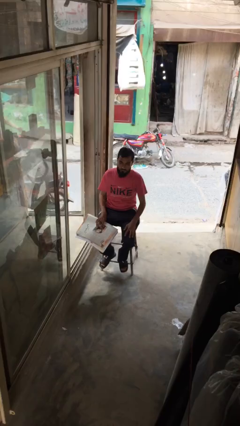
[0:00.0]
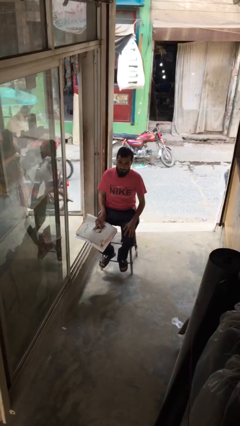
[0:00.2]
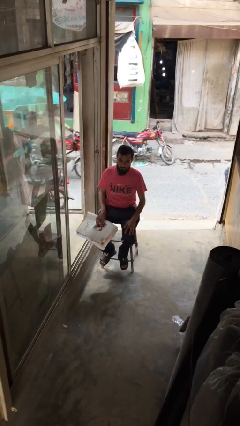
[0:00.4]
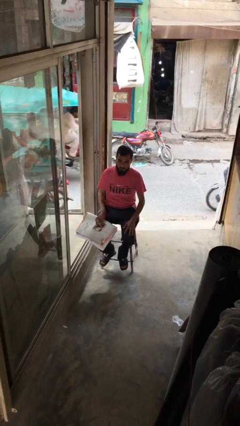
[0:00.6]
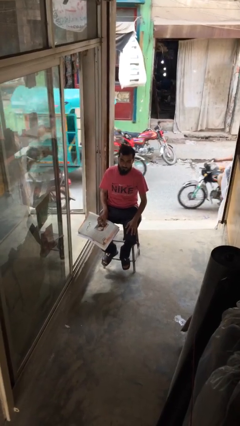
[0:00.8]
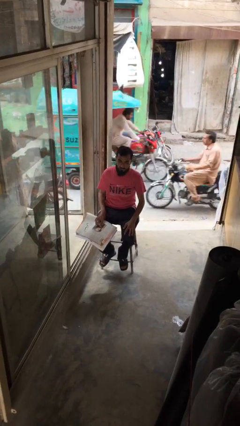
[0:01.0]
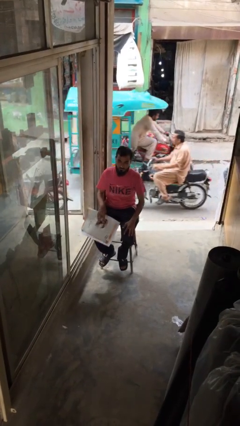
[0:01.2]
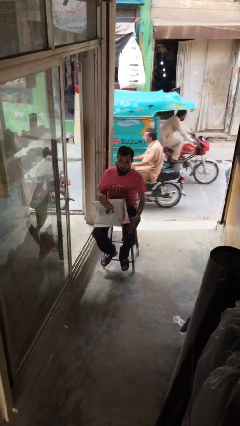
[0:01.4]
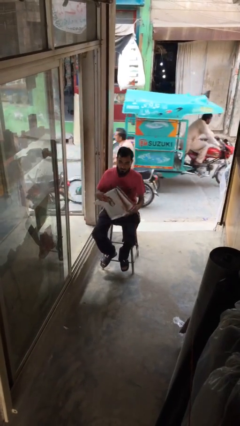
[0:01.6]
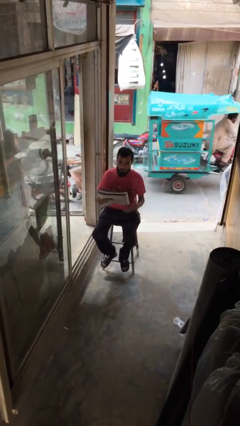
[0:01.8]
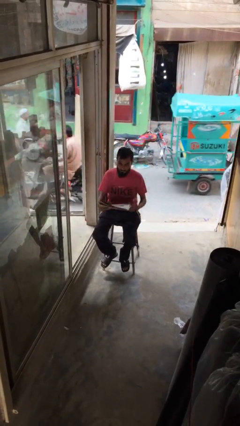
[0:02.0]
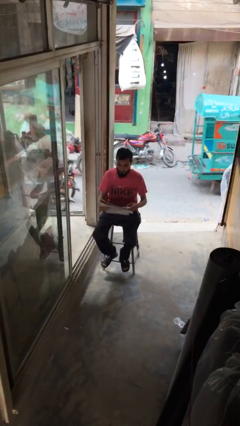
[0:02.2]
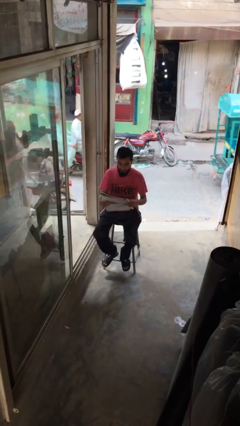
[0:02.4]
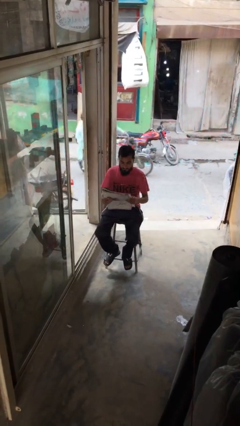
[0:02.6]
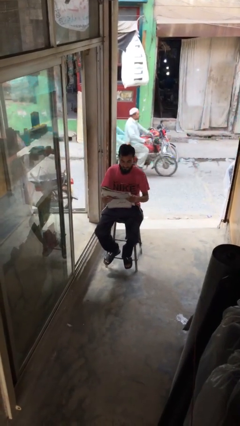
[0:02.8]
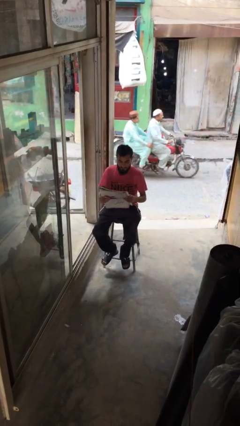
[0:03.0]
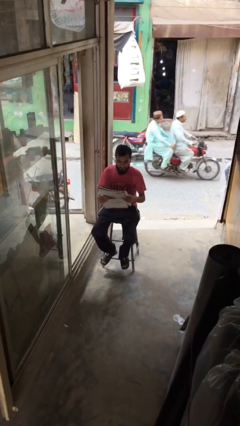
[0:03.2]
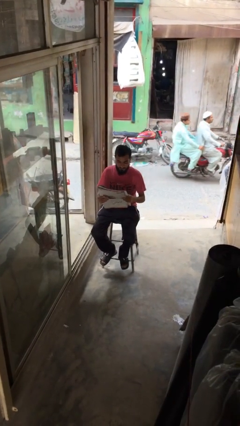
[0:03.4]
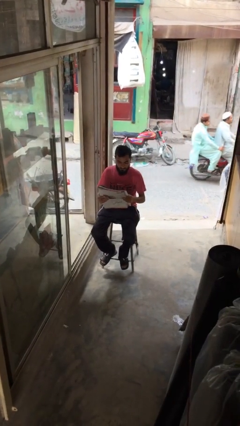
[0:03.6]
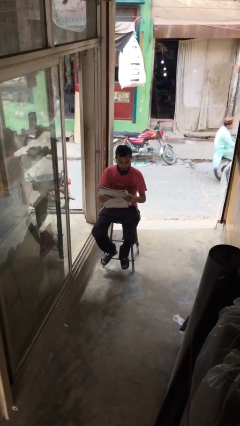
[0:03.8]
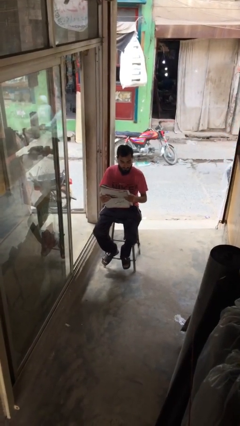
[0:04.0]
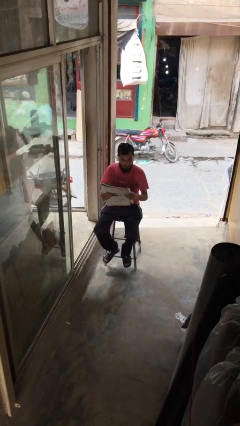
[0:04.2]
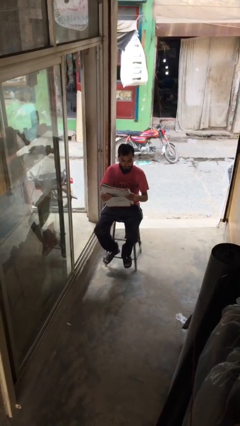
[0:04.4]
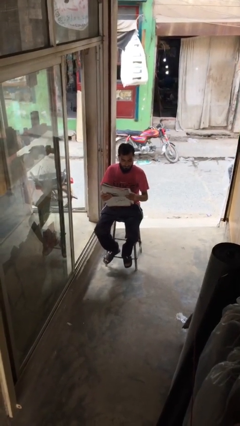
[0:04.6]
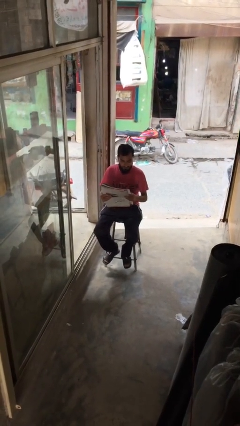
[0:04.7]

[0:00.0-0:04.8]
person reads document

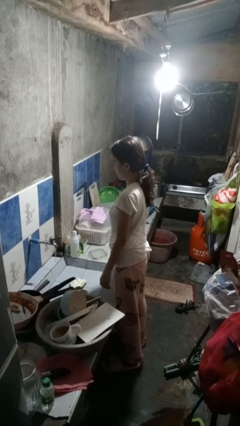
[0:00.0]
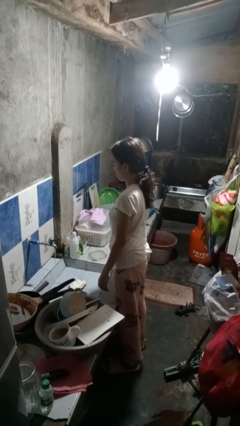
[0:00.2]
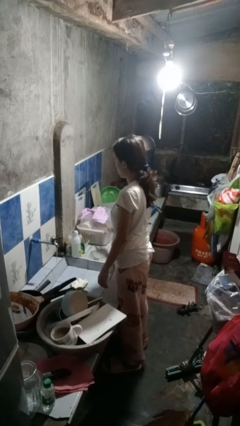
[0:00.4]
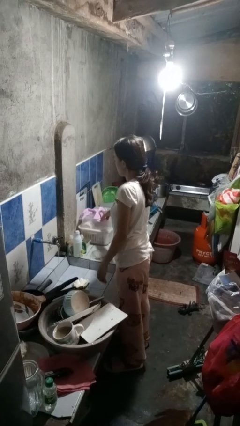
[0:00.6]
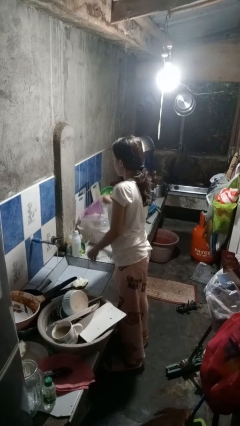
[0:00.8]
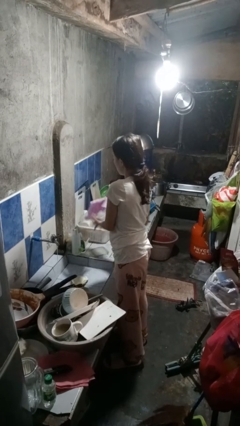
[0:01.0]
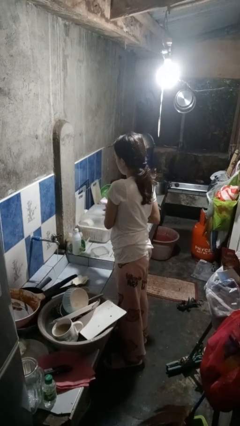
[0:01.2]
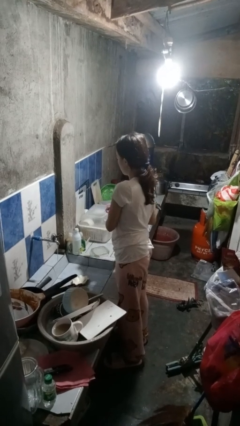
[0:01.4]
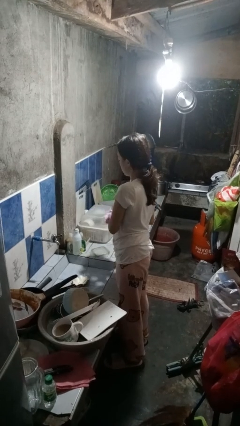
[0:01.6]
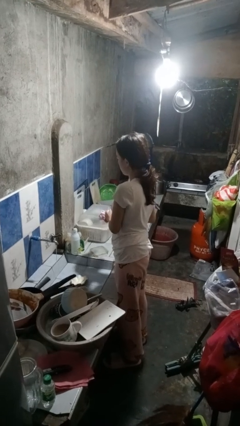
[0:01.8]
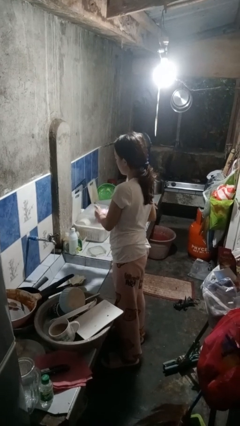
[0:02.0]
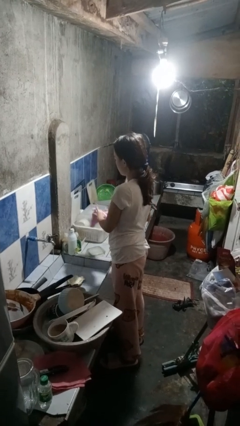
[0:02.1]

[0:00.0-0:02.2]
person dries hands with towel

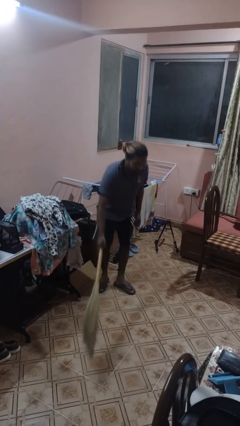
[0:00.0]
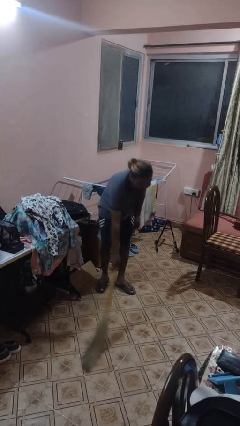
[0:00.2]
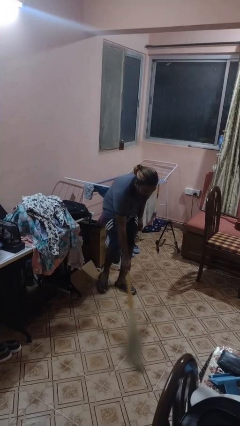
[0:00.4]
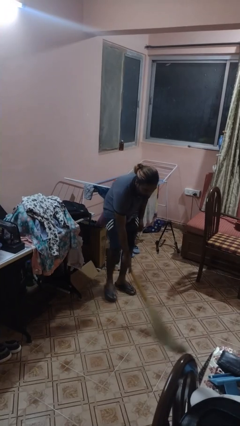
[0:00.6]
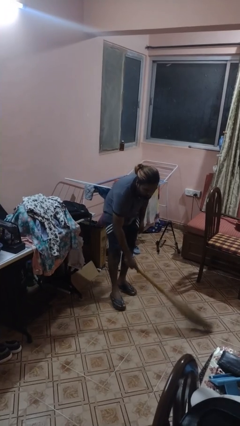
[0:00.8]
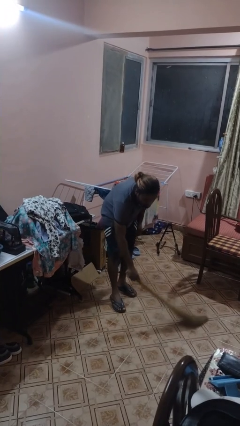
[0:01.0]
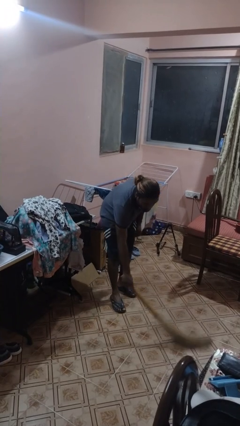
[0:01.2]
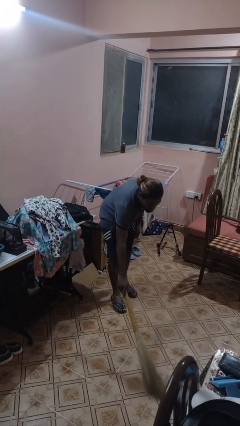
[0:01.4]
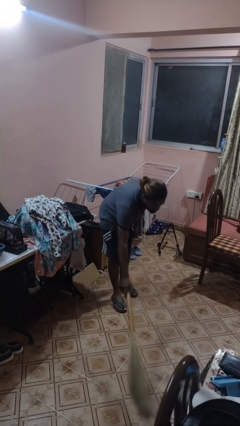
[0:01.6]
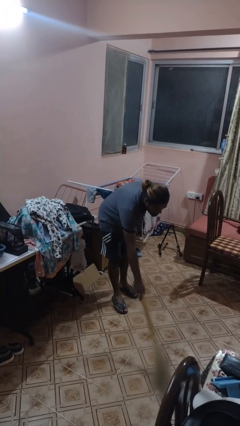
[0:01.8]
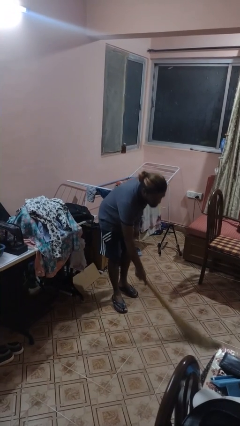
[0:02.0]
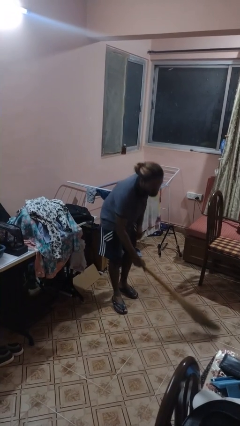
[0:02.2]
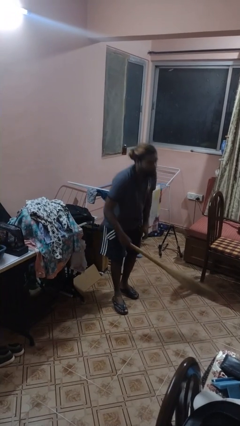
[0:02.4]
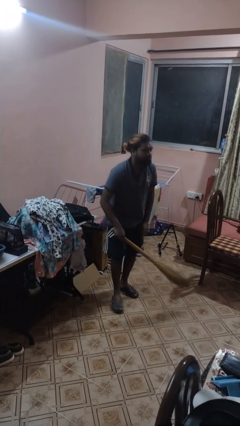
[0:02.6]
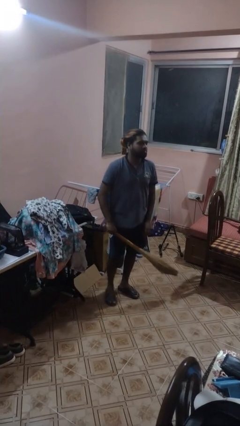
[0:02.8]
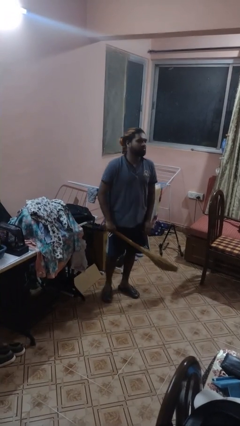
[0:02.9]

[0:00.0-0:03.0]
person sweeps floor

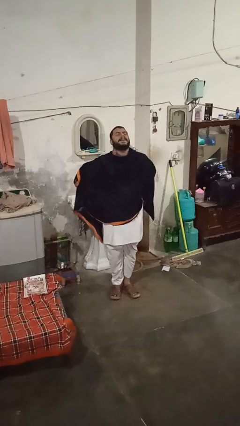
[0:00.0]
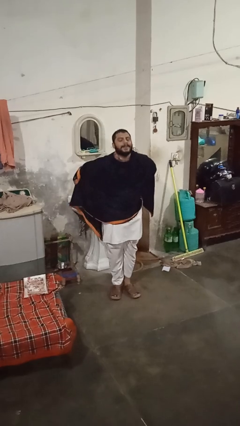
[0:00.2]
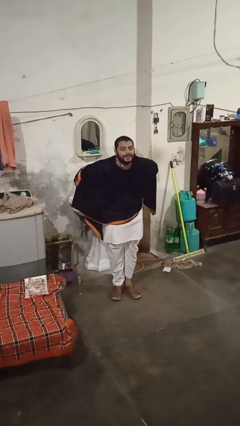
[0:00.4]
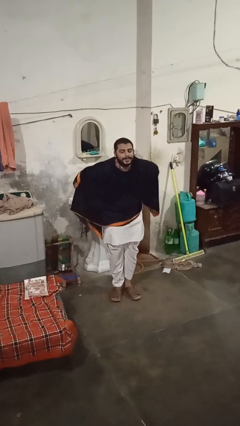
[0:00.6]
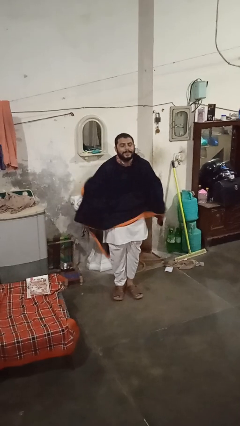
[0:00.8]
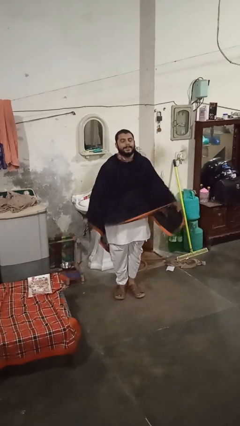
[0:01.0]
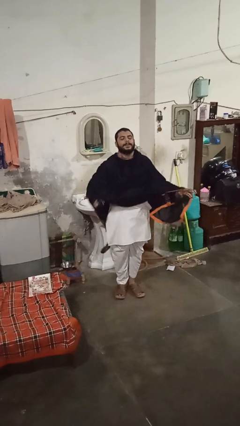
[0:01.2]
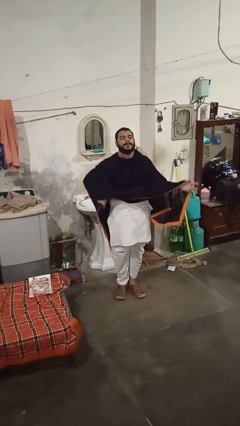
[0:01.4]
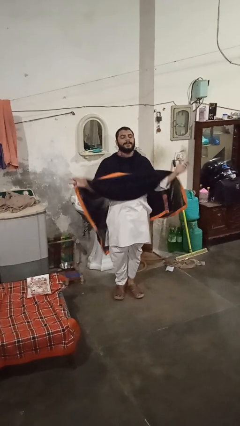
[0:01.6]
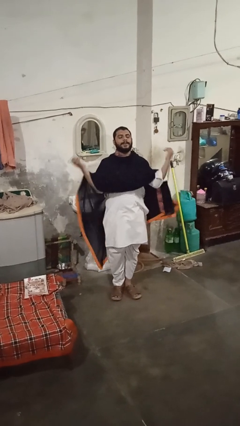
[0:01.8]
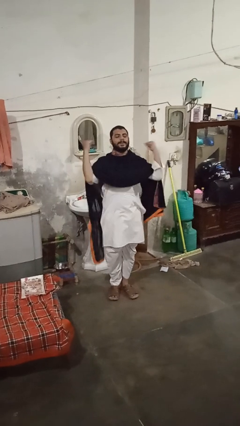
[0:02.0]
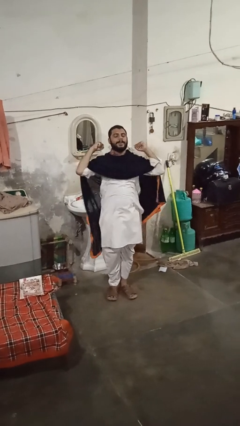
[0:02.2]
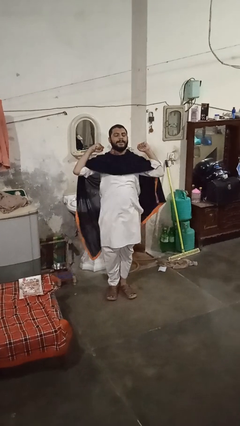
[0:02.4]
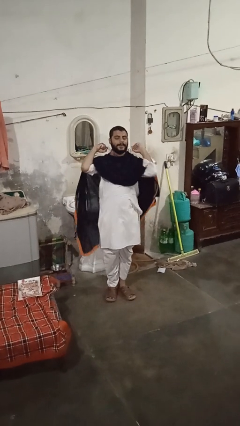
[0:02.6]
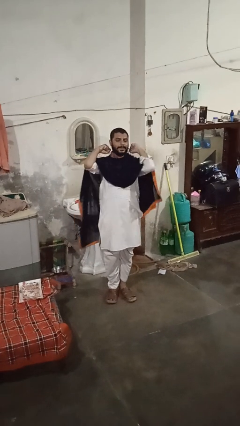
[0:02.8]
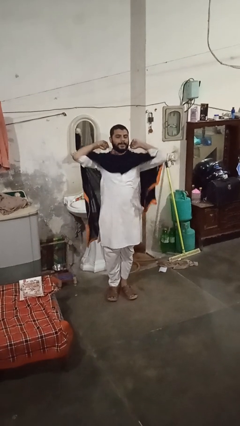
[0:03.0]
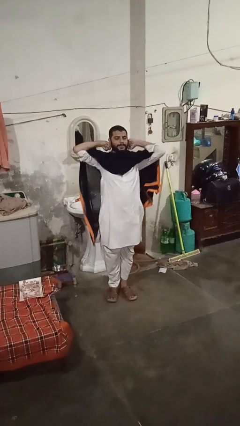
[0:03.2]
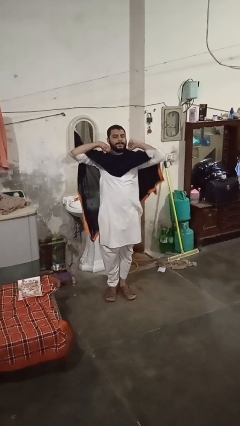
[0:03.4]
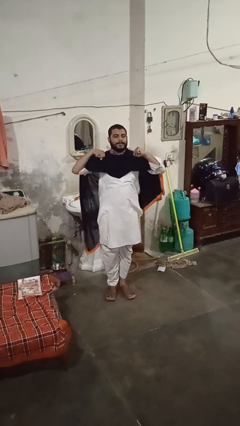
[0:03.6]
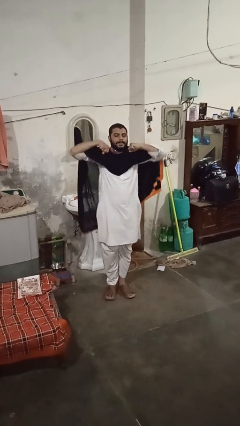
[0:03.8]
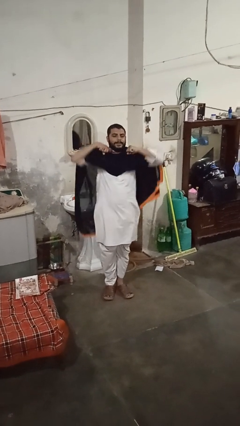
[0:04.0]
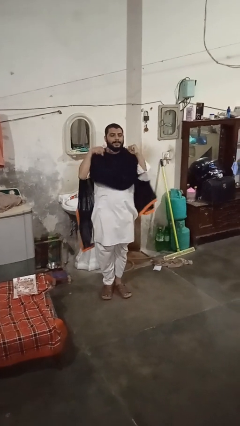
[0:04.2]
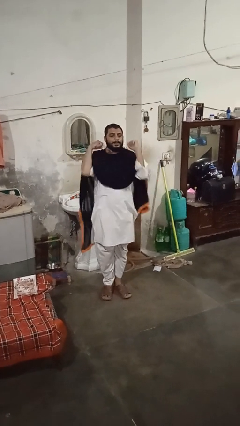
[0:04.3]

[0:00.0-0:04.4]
person stretches arms to side

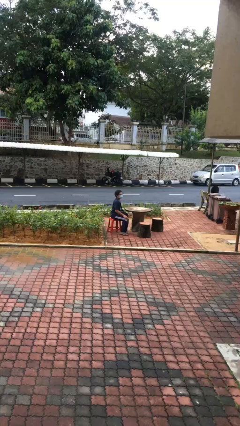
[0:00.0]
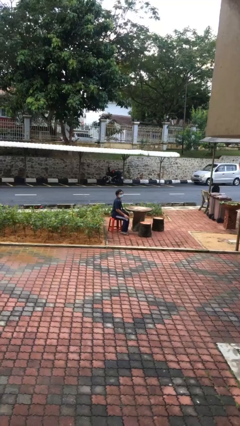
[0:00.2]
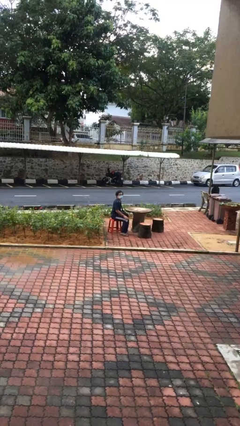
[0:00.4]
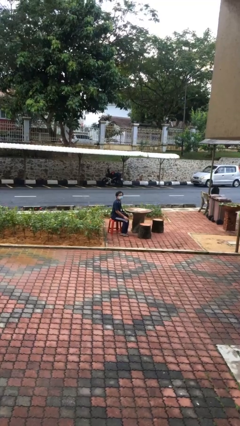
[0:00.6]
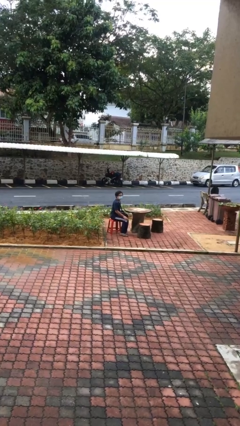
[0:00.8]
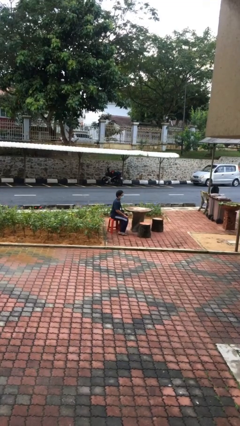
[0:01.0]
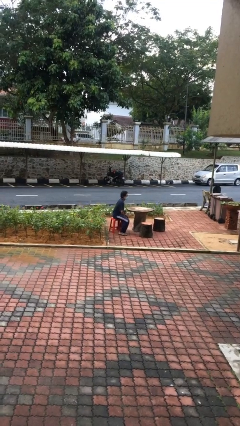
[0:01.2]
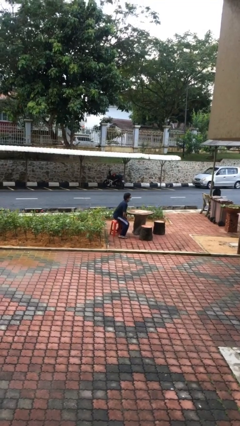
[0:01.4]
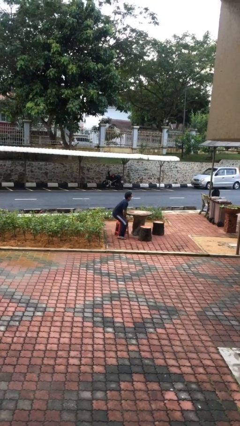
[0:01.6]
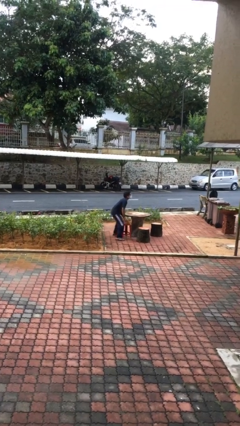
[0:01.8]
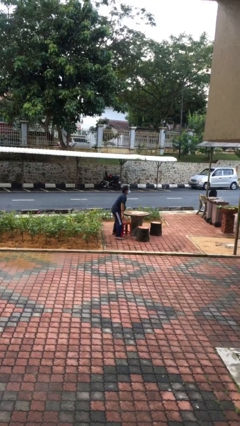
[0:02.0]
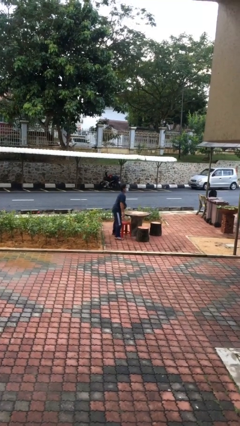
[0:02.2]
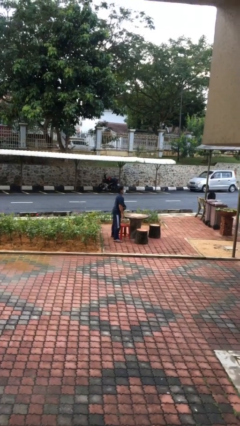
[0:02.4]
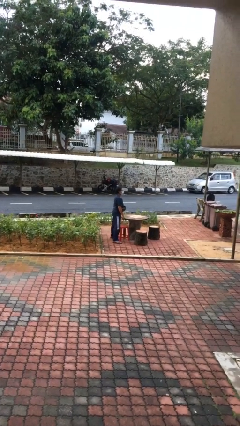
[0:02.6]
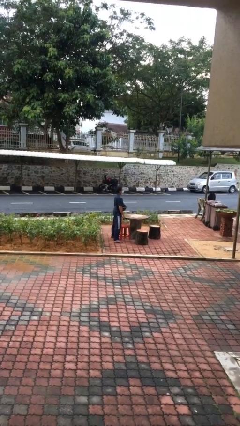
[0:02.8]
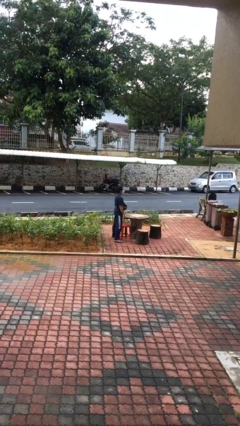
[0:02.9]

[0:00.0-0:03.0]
person stands up
